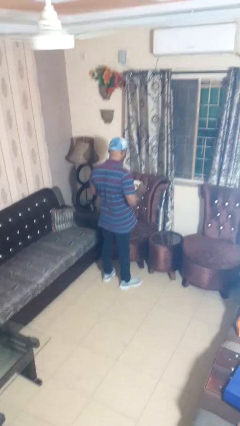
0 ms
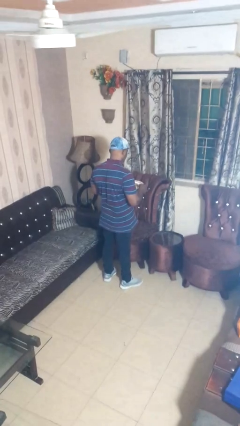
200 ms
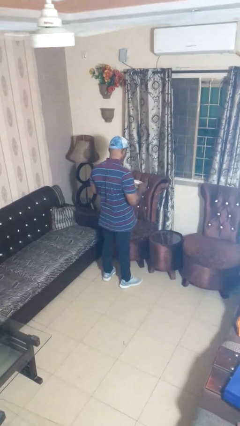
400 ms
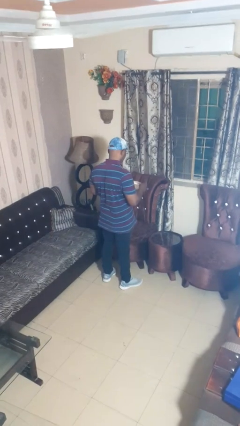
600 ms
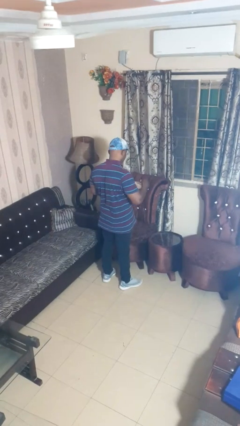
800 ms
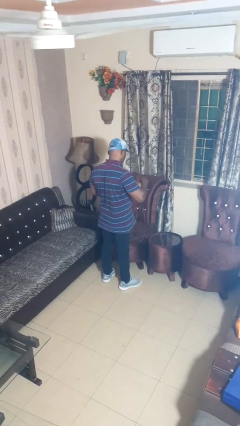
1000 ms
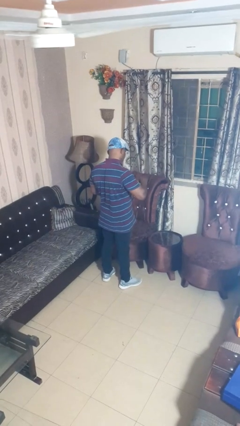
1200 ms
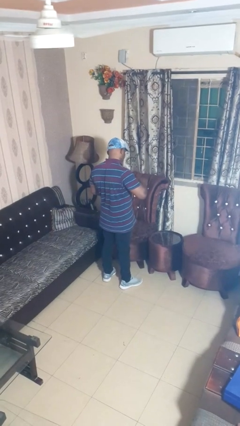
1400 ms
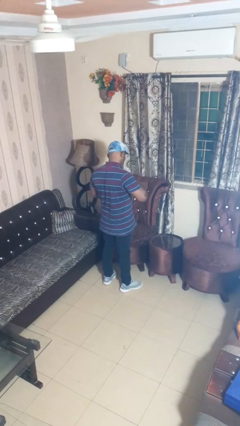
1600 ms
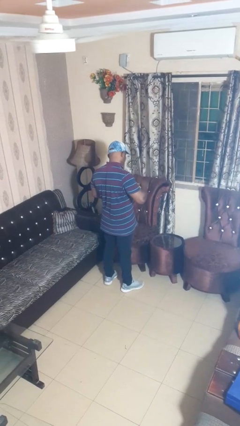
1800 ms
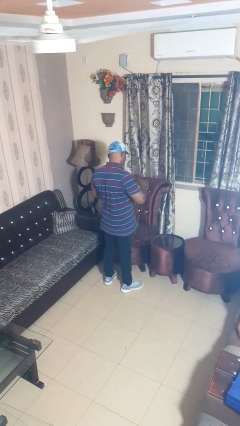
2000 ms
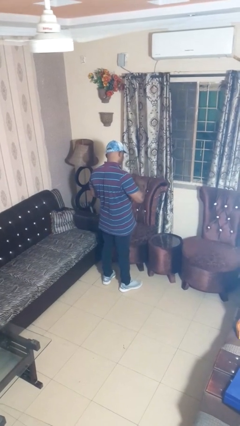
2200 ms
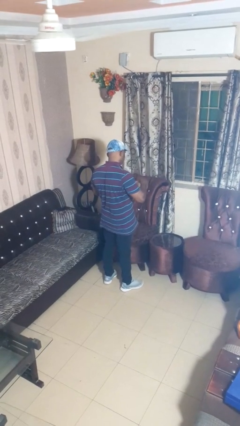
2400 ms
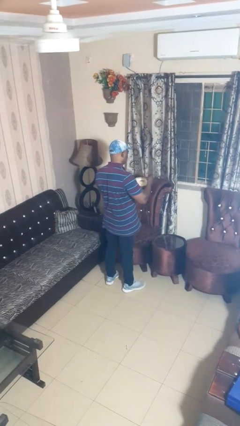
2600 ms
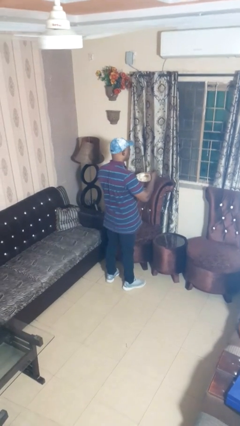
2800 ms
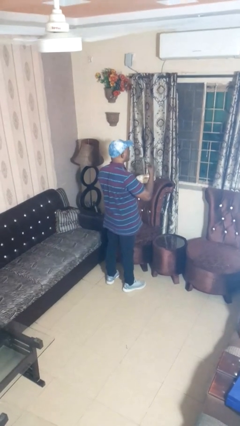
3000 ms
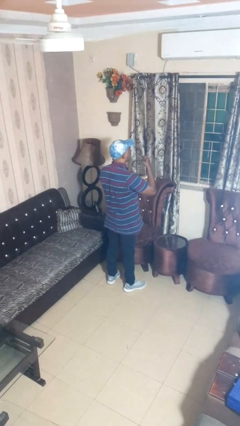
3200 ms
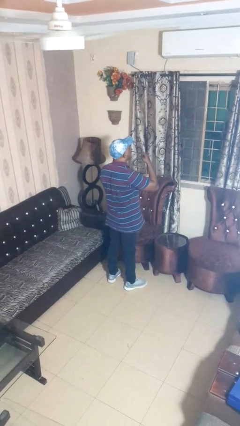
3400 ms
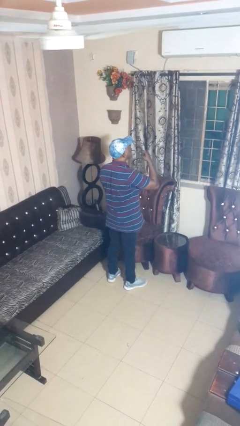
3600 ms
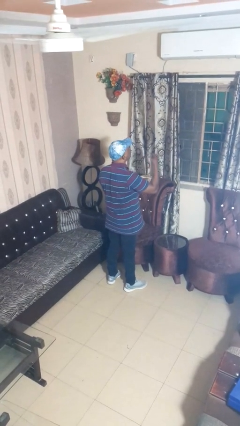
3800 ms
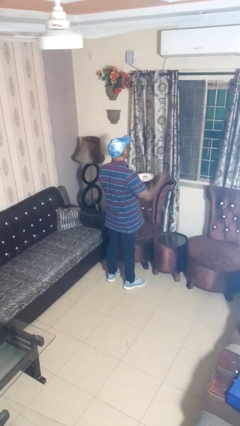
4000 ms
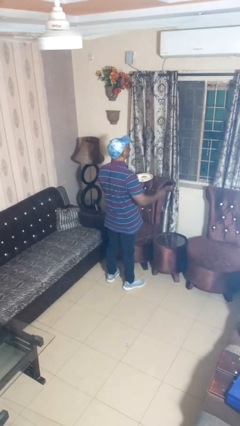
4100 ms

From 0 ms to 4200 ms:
person eats with utensil

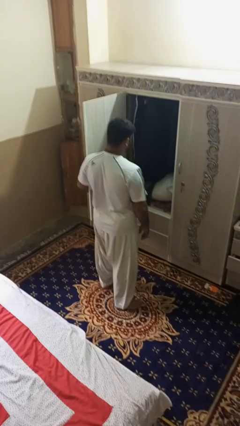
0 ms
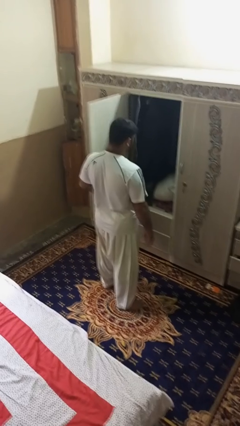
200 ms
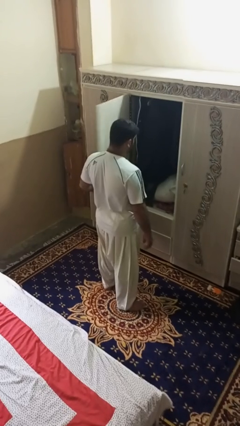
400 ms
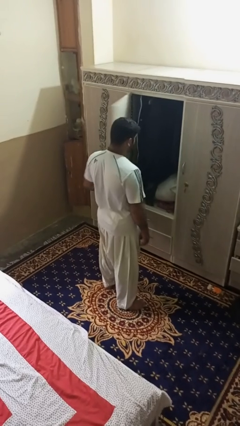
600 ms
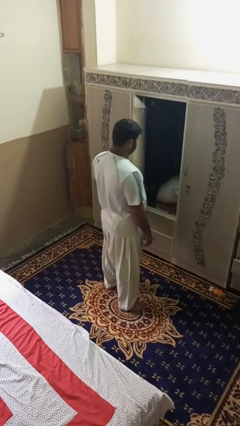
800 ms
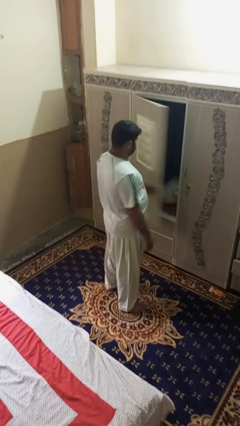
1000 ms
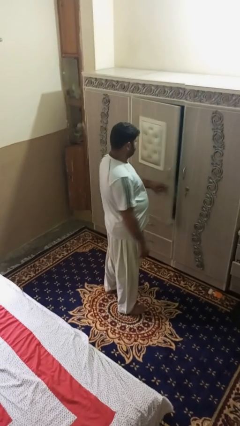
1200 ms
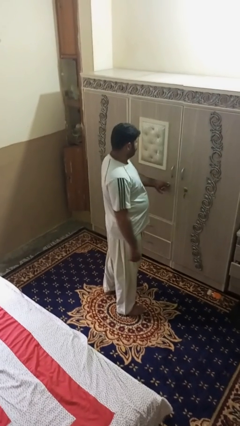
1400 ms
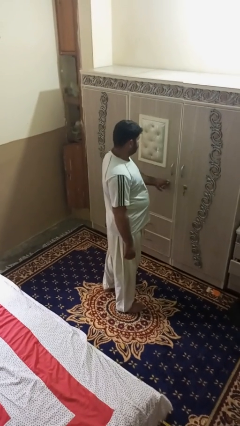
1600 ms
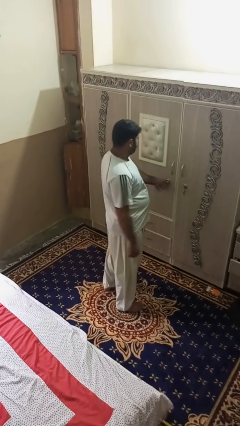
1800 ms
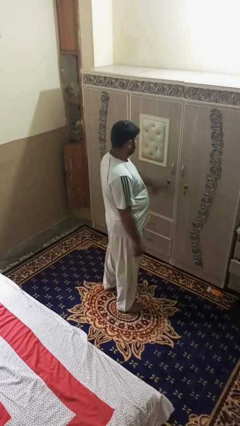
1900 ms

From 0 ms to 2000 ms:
person closes dresser drawer

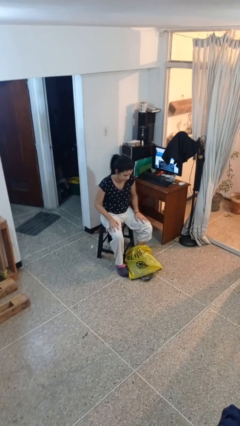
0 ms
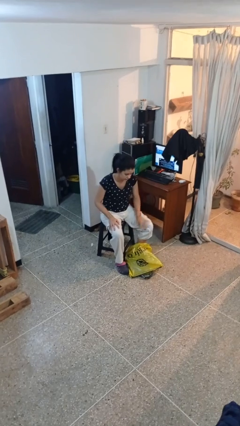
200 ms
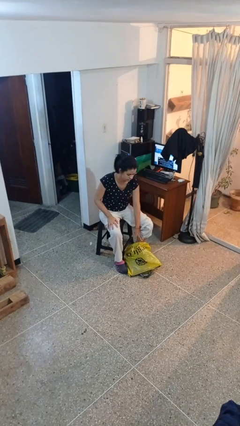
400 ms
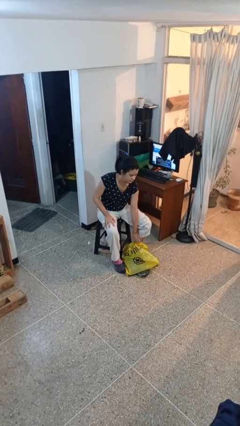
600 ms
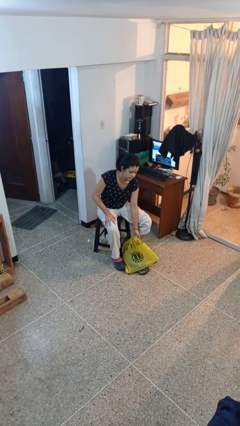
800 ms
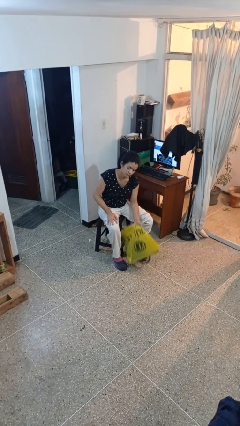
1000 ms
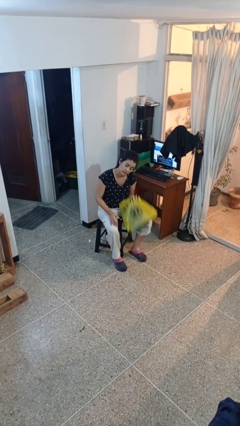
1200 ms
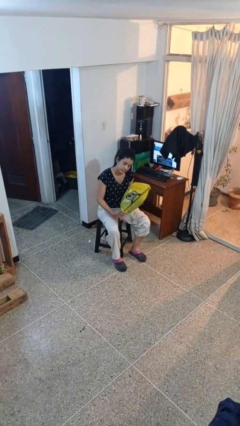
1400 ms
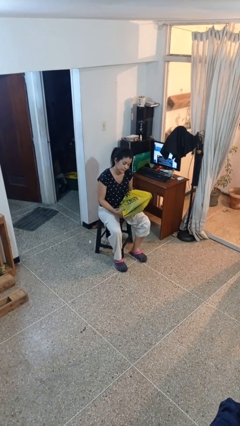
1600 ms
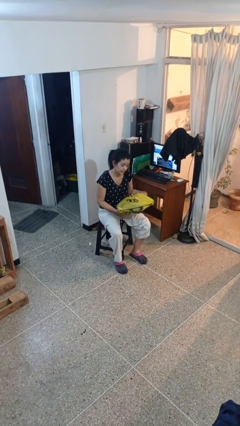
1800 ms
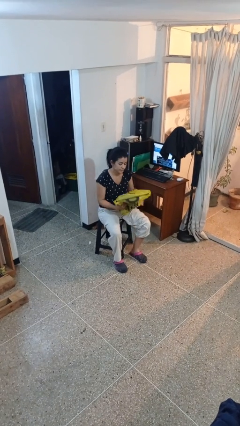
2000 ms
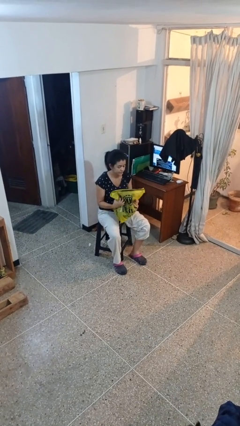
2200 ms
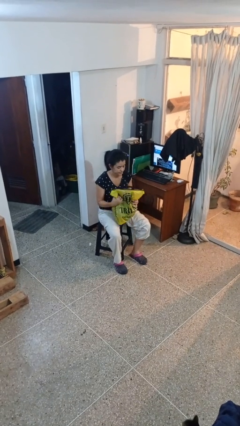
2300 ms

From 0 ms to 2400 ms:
person picks up object from floor

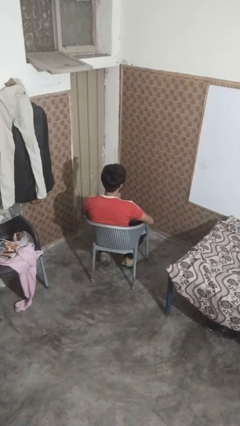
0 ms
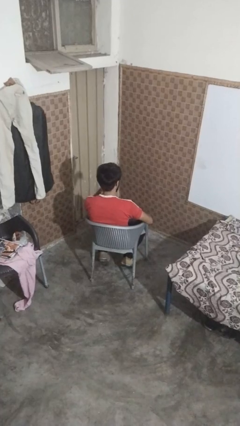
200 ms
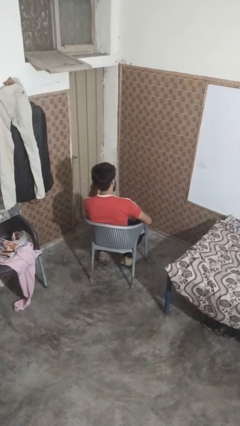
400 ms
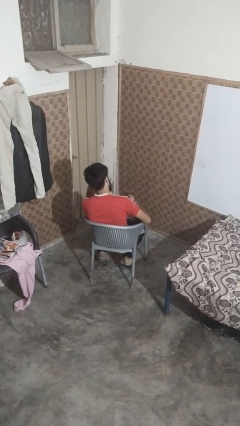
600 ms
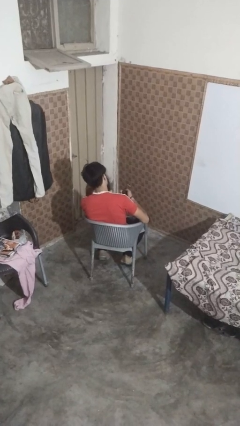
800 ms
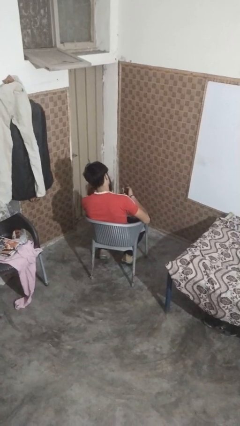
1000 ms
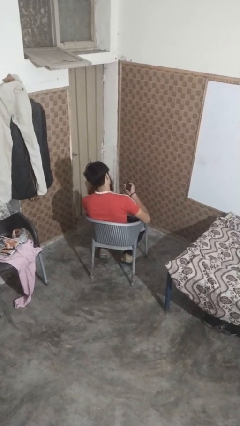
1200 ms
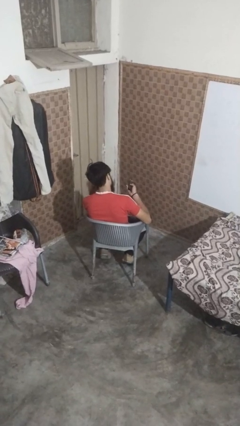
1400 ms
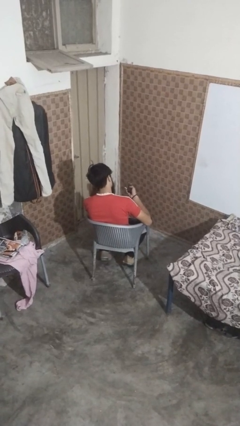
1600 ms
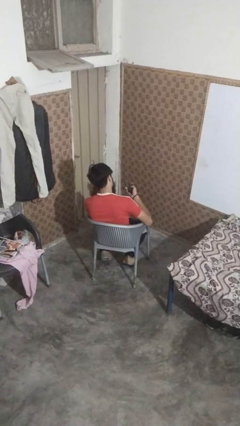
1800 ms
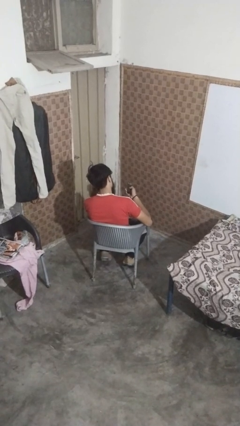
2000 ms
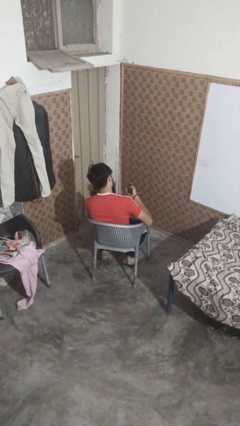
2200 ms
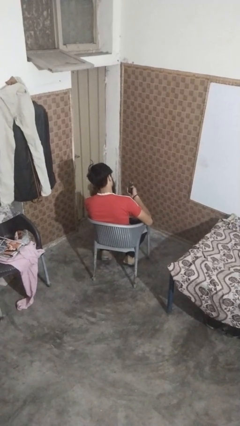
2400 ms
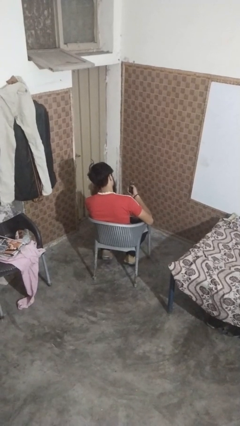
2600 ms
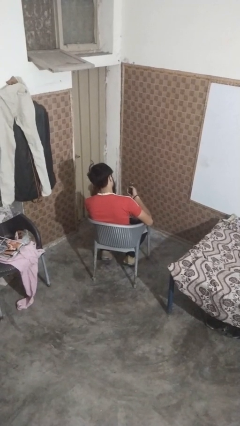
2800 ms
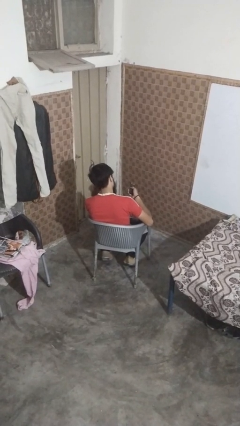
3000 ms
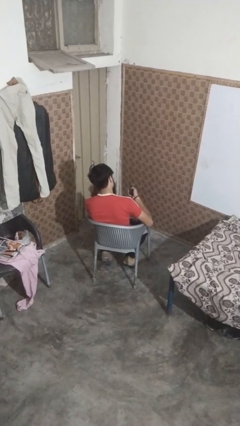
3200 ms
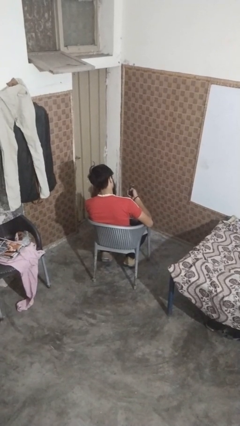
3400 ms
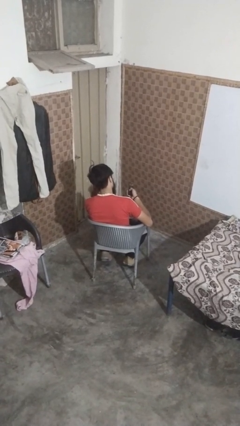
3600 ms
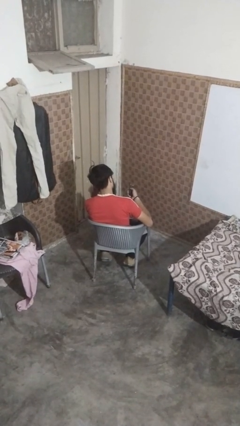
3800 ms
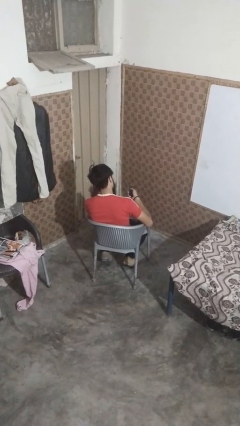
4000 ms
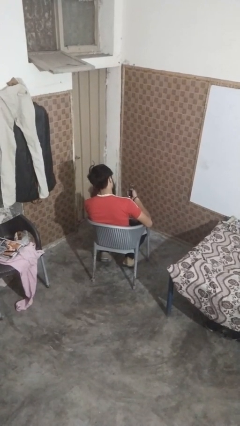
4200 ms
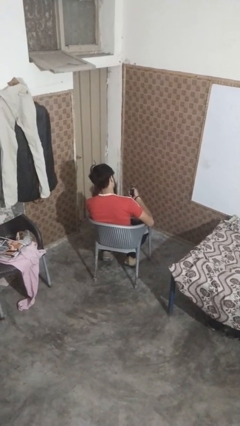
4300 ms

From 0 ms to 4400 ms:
person uses television remote

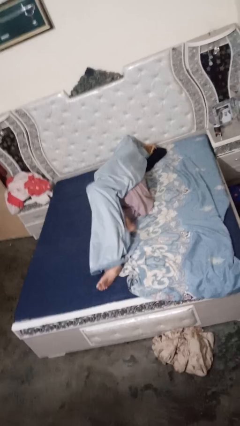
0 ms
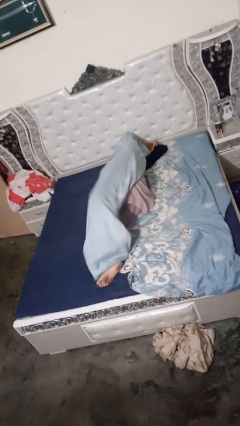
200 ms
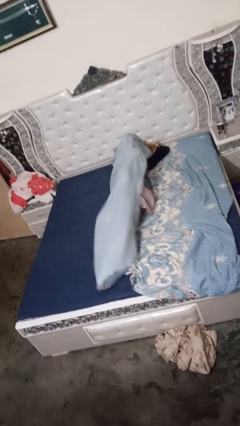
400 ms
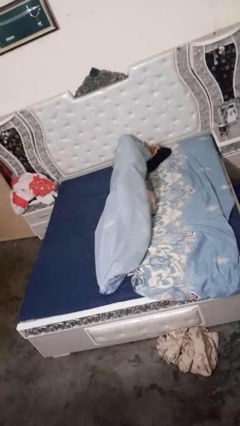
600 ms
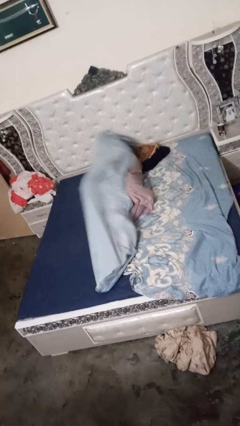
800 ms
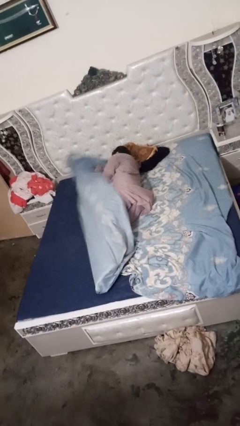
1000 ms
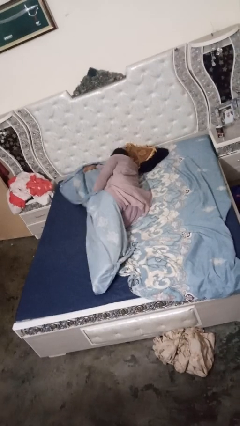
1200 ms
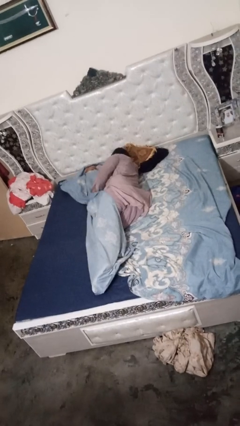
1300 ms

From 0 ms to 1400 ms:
person uncovers with bedsheets

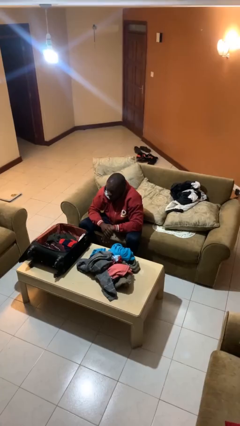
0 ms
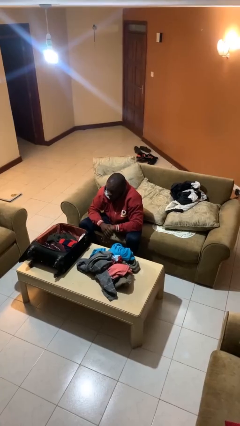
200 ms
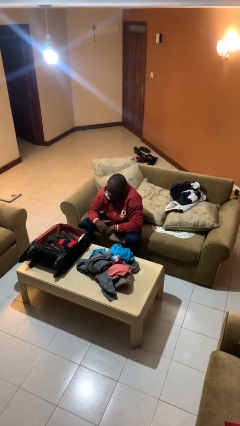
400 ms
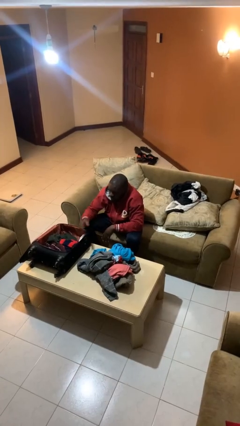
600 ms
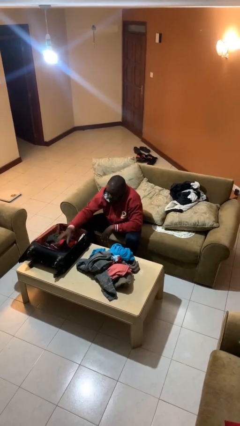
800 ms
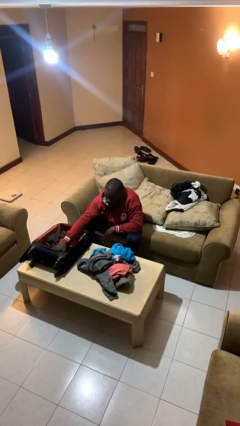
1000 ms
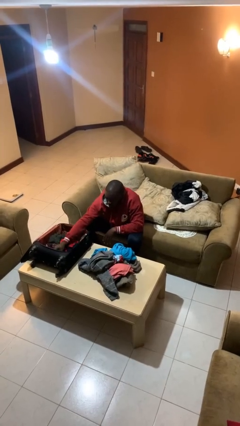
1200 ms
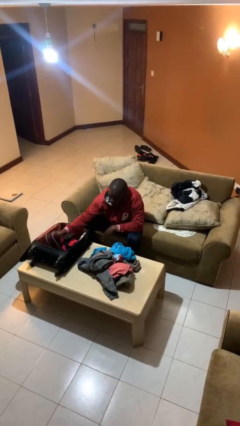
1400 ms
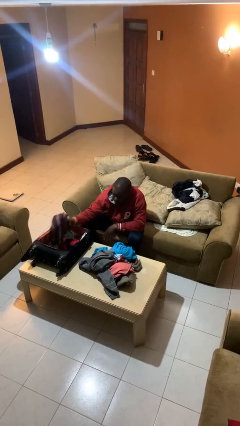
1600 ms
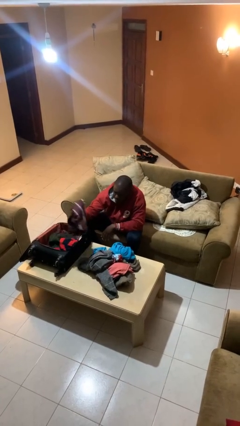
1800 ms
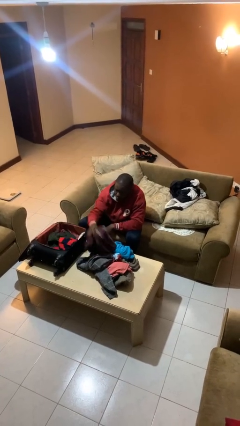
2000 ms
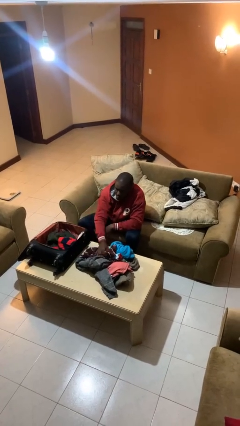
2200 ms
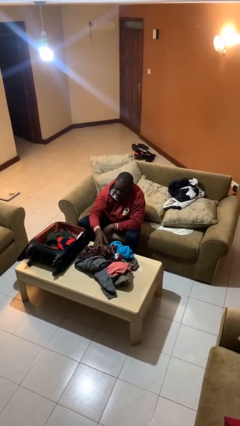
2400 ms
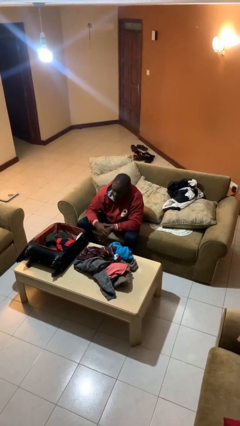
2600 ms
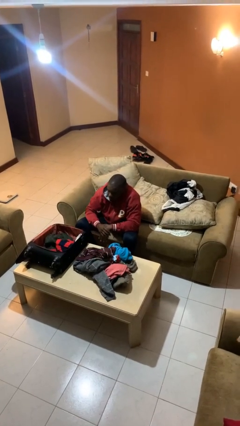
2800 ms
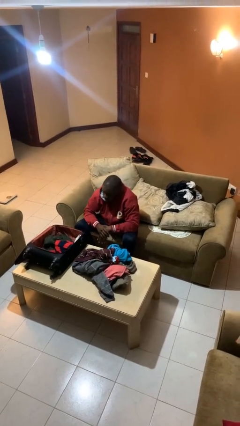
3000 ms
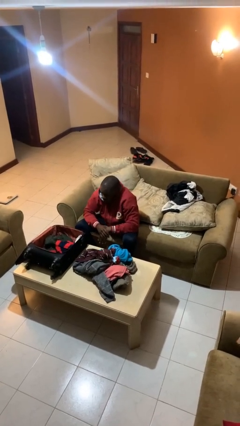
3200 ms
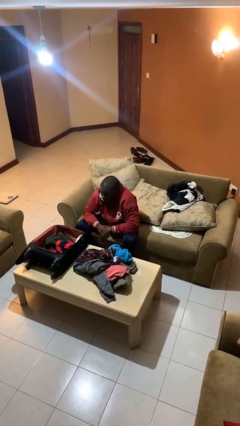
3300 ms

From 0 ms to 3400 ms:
person unloads clothes from suitcase
